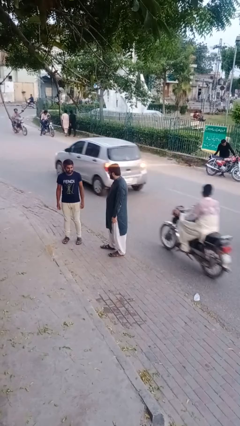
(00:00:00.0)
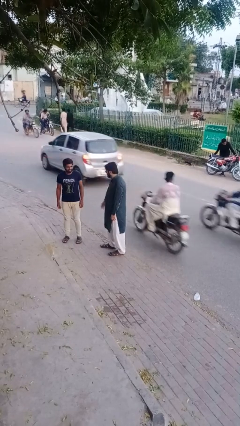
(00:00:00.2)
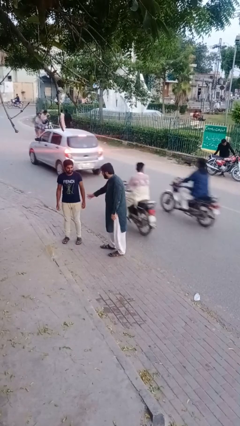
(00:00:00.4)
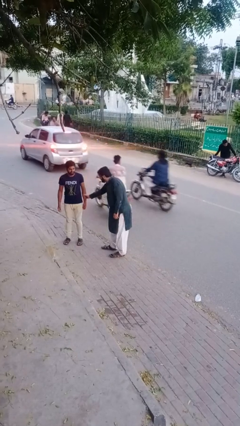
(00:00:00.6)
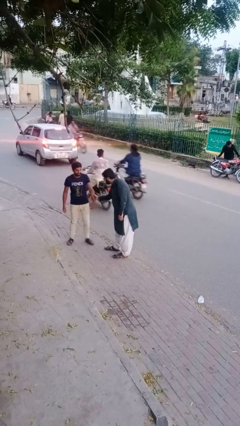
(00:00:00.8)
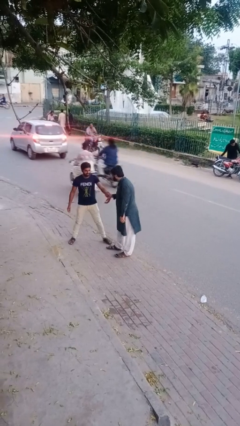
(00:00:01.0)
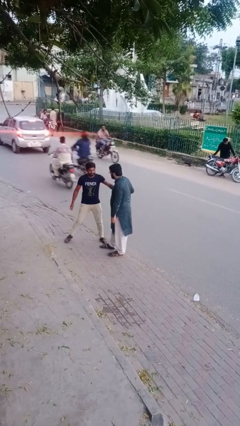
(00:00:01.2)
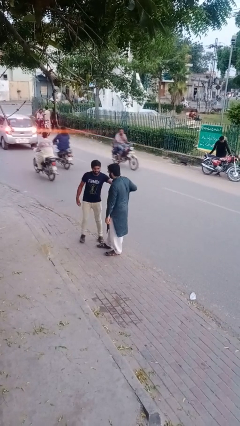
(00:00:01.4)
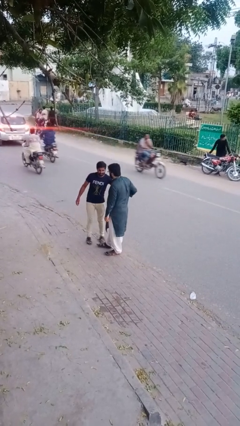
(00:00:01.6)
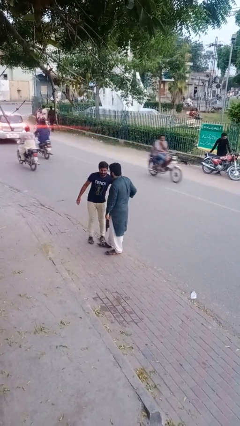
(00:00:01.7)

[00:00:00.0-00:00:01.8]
person grabs person by forearm

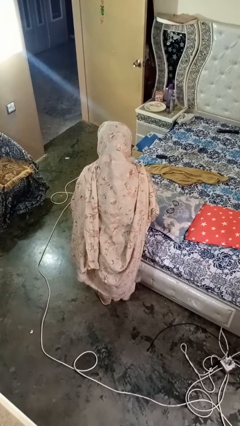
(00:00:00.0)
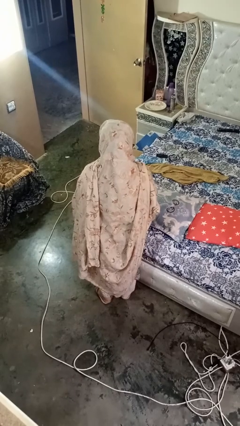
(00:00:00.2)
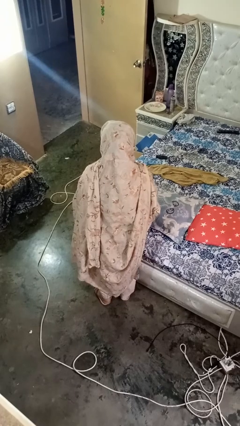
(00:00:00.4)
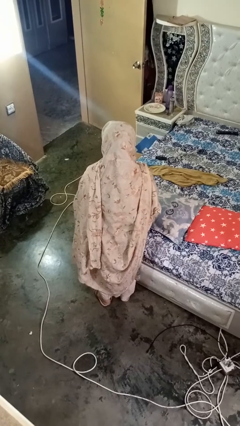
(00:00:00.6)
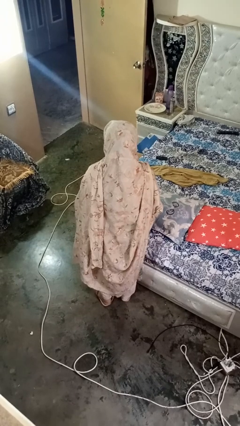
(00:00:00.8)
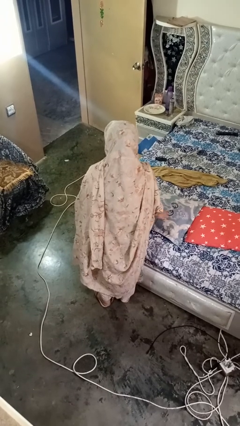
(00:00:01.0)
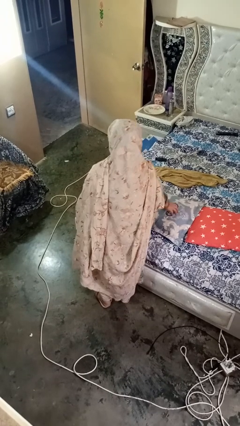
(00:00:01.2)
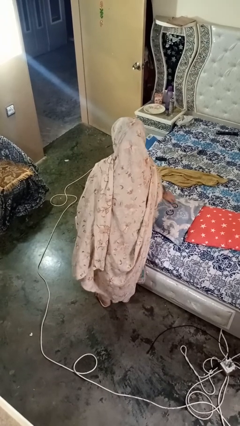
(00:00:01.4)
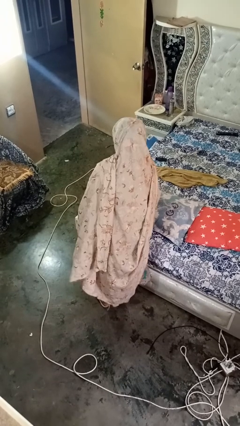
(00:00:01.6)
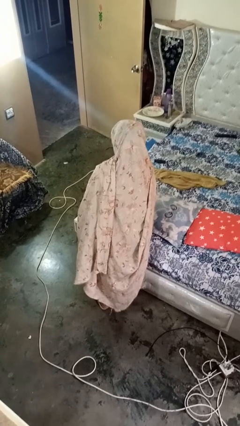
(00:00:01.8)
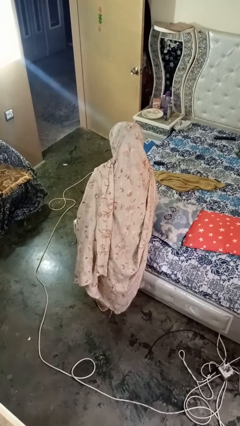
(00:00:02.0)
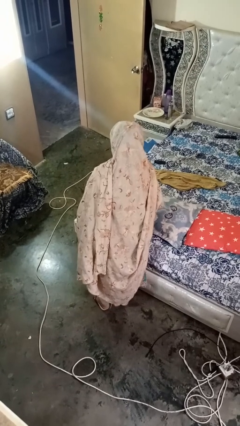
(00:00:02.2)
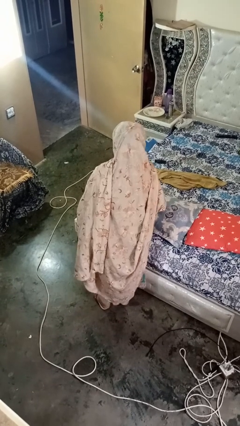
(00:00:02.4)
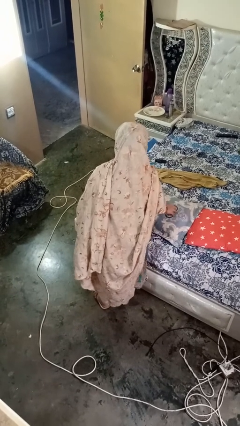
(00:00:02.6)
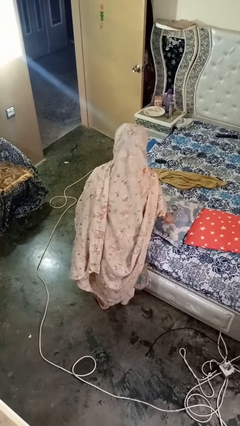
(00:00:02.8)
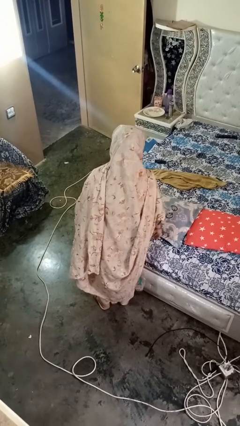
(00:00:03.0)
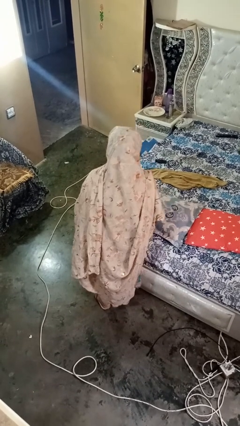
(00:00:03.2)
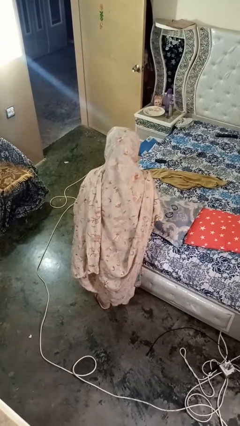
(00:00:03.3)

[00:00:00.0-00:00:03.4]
person taps object with finger

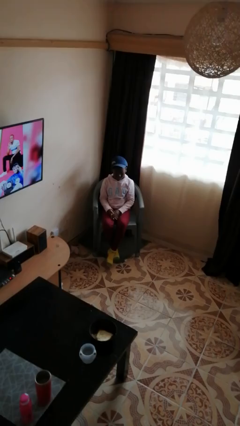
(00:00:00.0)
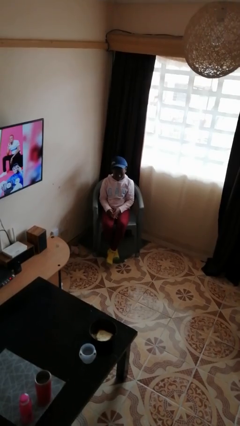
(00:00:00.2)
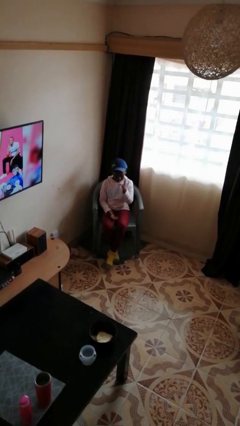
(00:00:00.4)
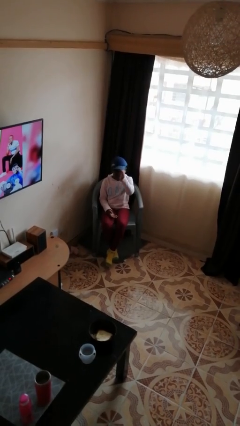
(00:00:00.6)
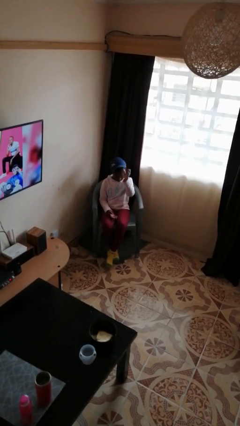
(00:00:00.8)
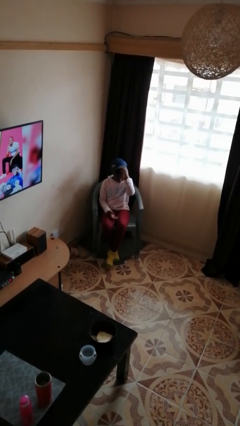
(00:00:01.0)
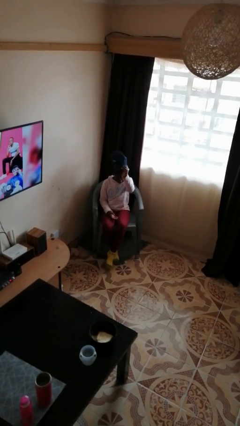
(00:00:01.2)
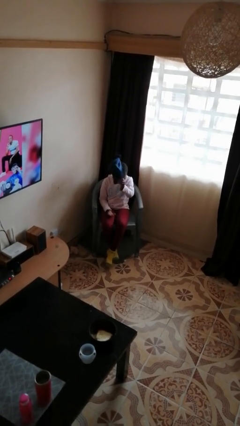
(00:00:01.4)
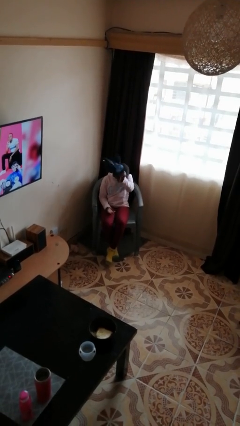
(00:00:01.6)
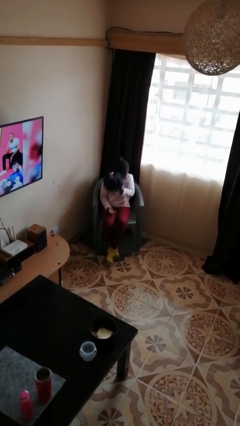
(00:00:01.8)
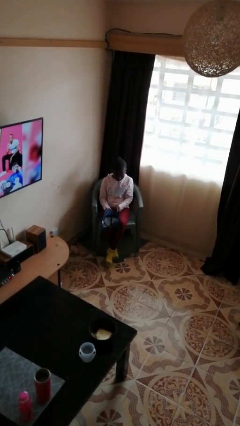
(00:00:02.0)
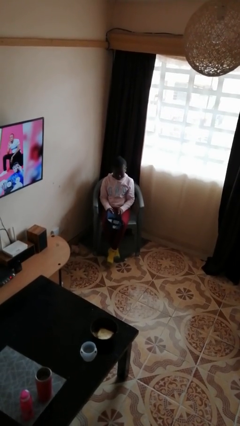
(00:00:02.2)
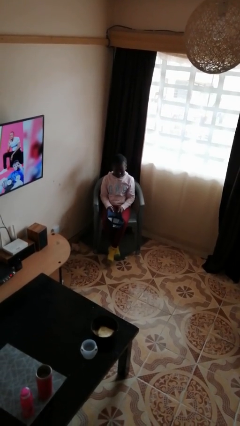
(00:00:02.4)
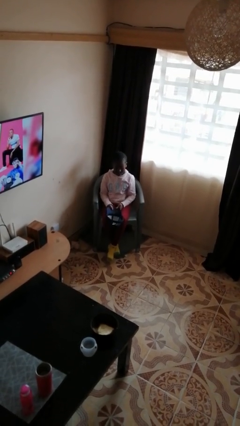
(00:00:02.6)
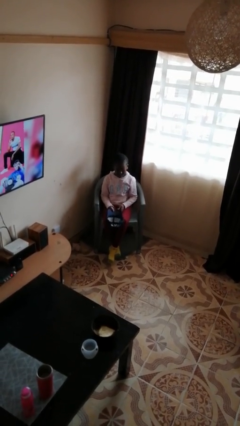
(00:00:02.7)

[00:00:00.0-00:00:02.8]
person takes off hat

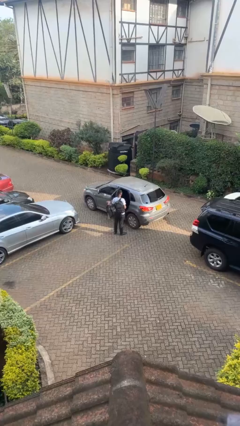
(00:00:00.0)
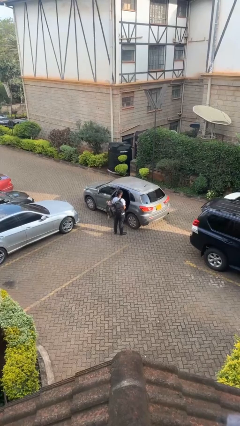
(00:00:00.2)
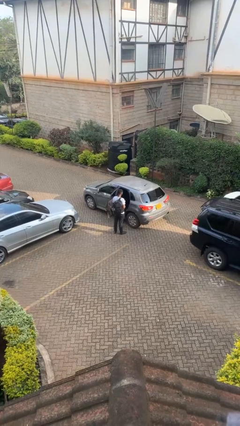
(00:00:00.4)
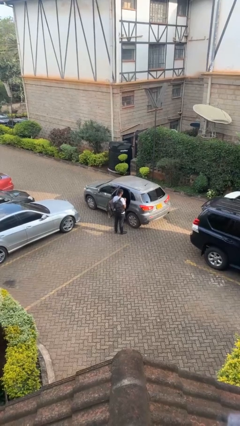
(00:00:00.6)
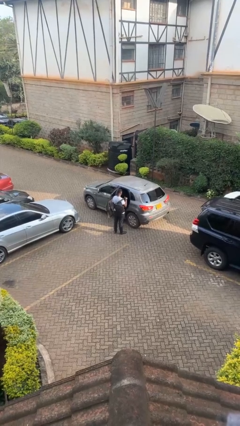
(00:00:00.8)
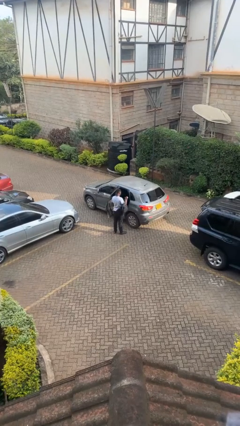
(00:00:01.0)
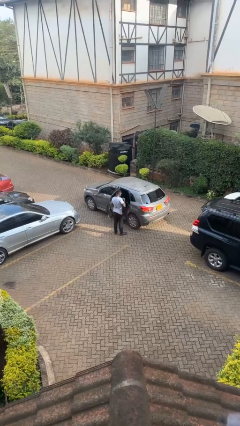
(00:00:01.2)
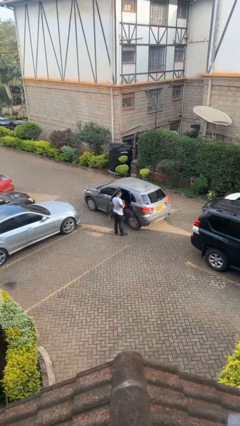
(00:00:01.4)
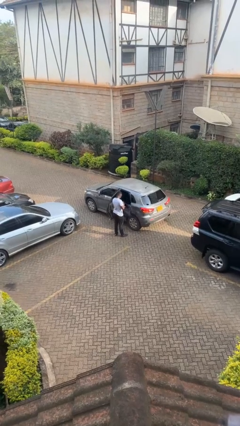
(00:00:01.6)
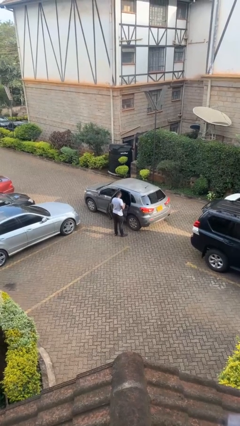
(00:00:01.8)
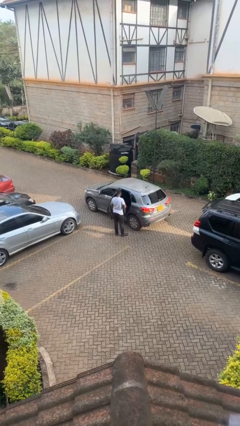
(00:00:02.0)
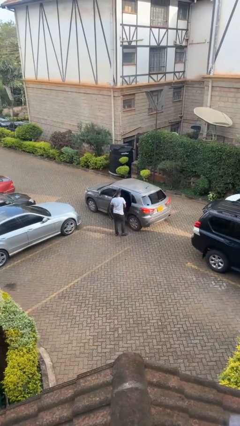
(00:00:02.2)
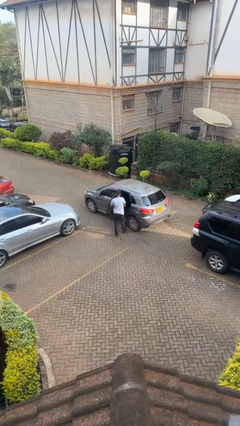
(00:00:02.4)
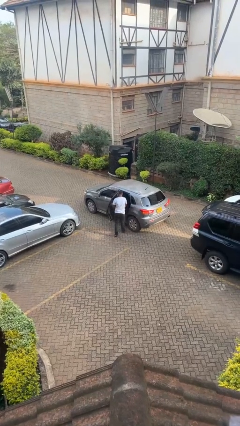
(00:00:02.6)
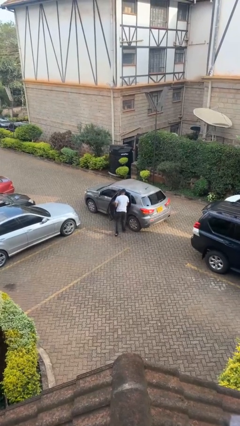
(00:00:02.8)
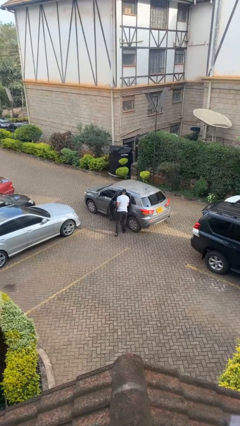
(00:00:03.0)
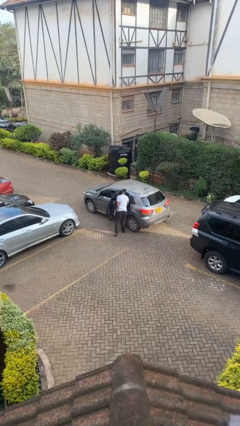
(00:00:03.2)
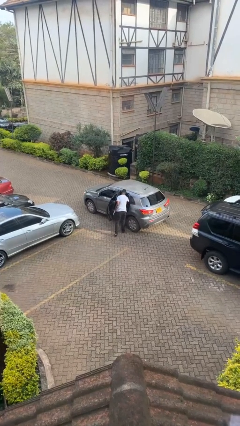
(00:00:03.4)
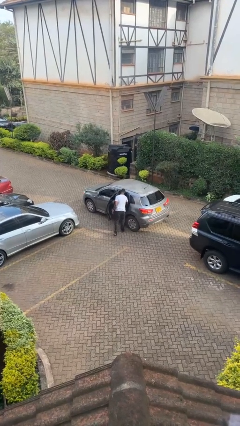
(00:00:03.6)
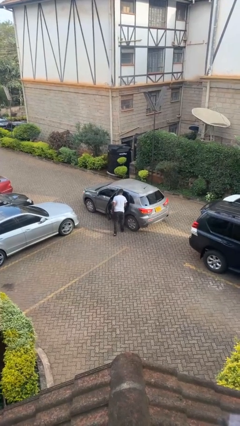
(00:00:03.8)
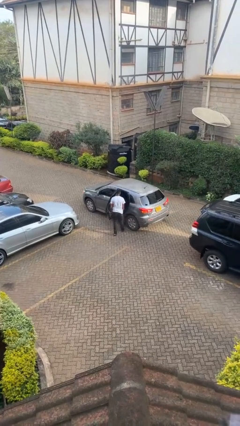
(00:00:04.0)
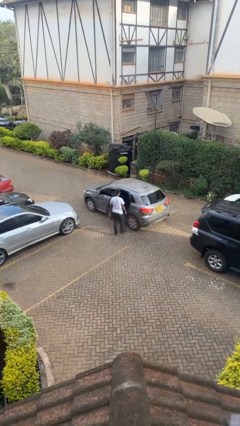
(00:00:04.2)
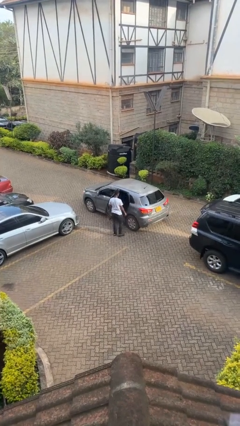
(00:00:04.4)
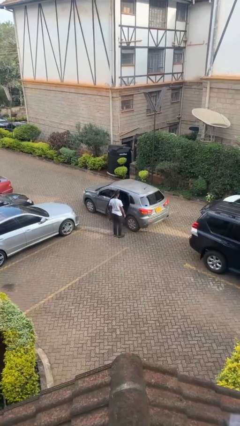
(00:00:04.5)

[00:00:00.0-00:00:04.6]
person loads car

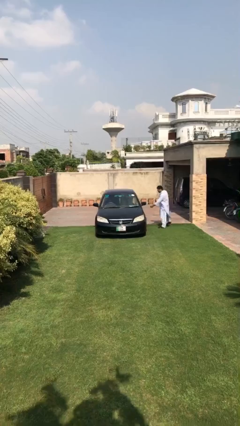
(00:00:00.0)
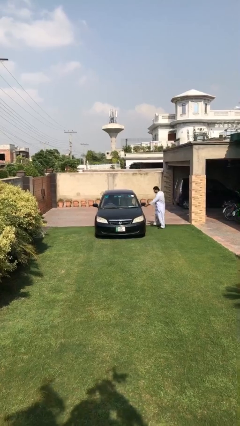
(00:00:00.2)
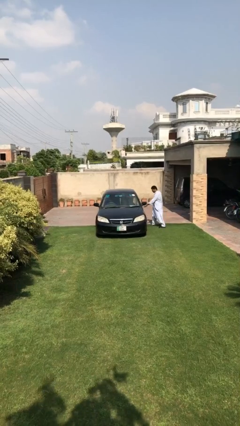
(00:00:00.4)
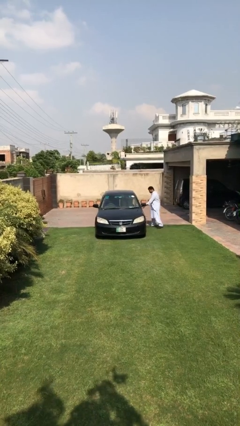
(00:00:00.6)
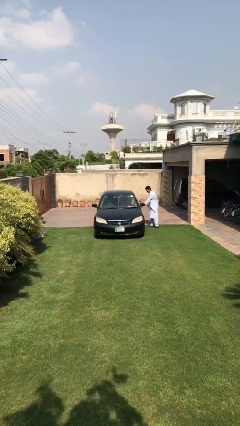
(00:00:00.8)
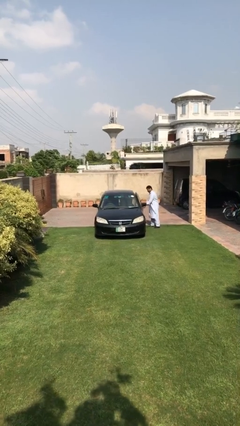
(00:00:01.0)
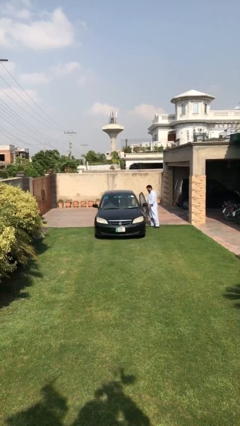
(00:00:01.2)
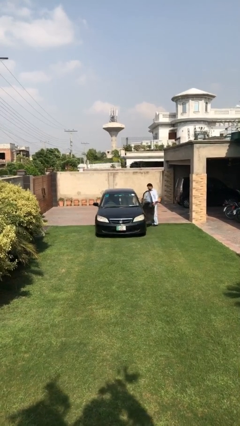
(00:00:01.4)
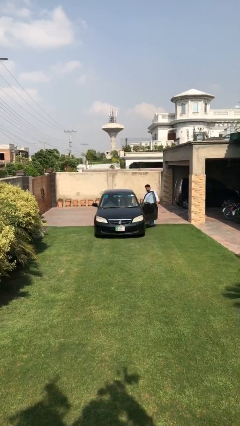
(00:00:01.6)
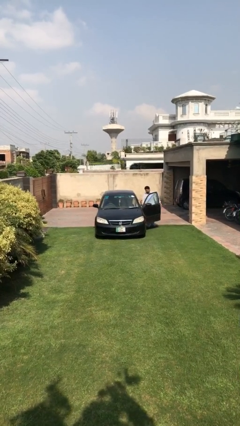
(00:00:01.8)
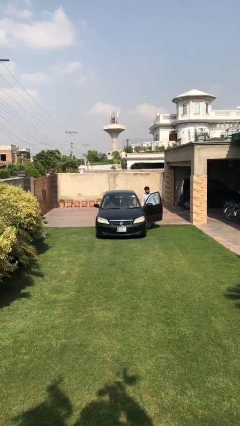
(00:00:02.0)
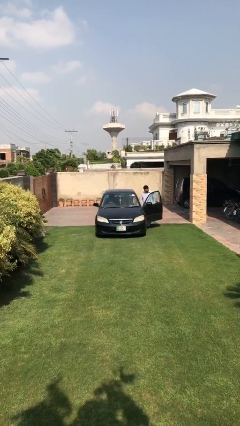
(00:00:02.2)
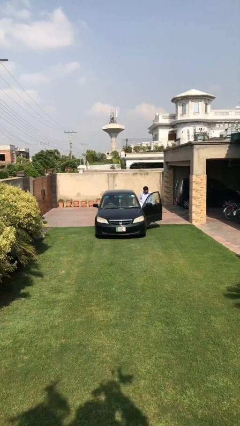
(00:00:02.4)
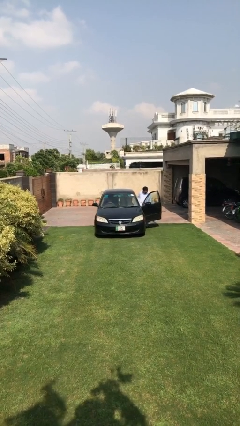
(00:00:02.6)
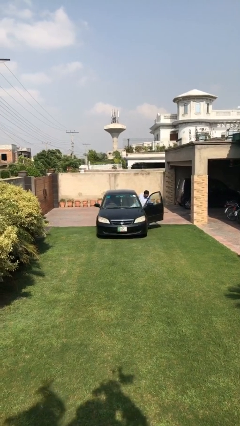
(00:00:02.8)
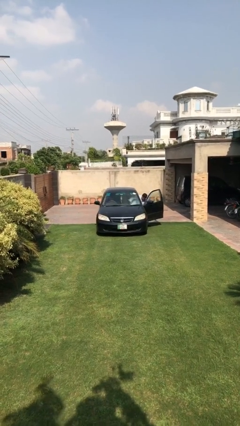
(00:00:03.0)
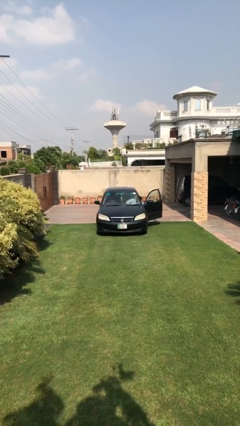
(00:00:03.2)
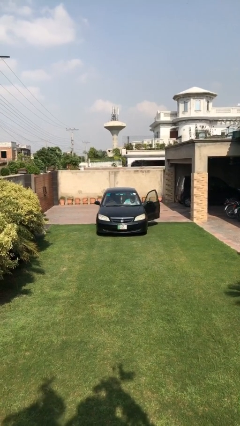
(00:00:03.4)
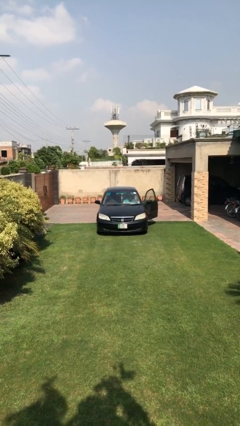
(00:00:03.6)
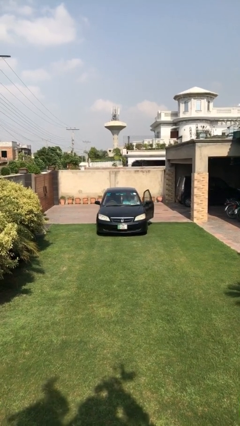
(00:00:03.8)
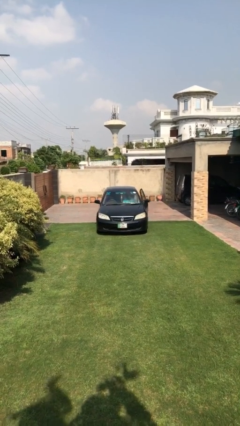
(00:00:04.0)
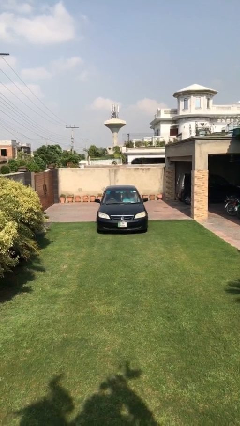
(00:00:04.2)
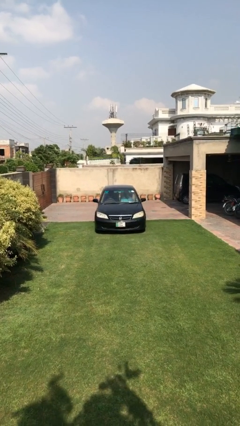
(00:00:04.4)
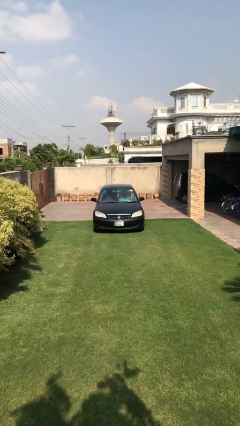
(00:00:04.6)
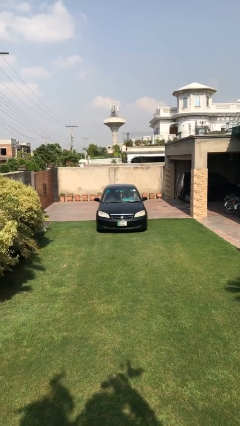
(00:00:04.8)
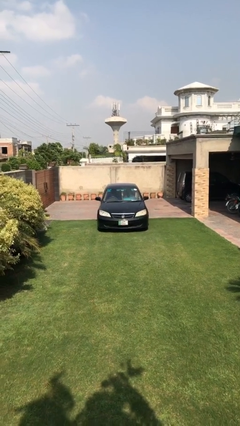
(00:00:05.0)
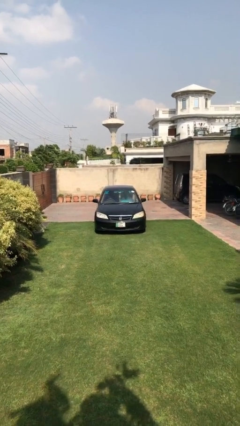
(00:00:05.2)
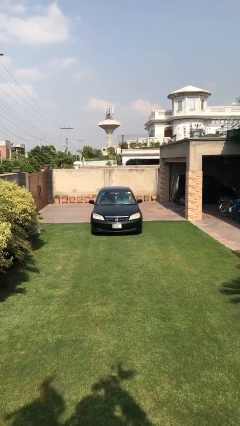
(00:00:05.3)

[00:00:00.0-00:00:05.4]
car picks up person
